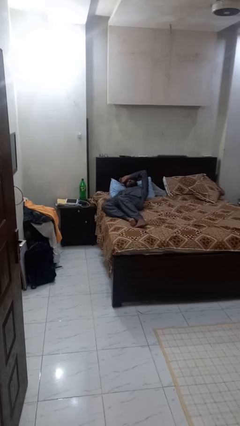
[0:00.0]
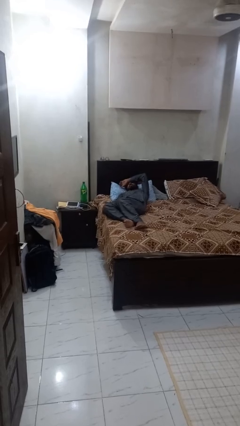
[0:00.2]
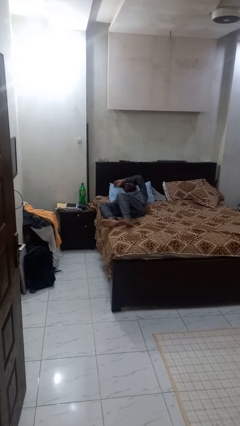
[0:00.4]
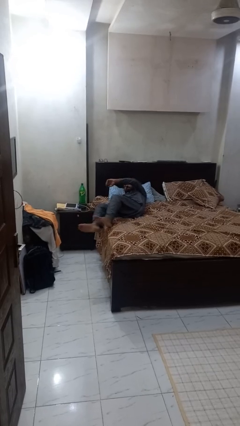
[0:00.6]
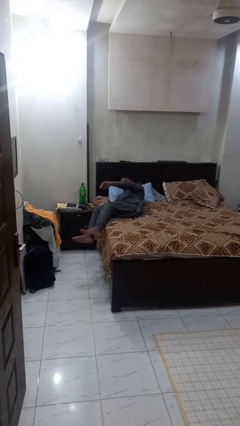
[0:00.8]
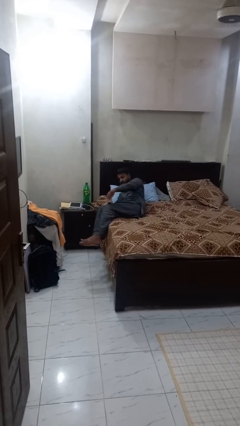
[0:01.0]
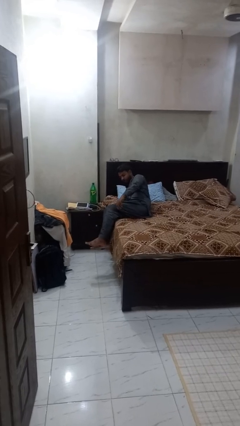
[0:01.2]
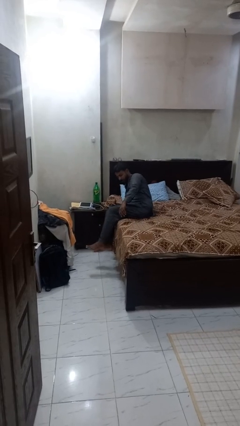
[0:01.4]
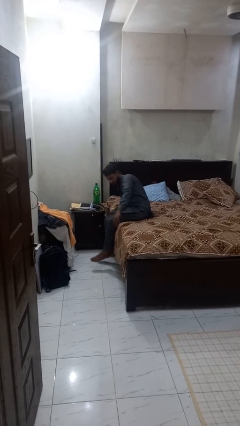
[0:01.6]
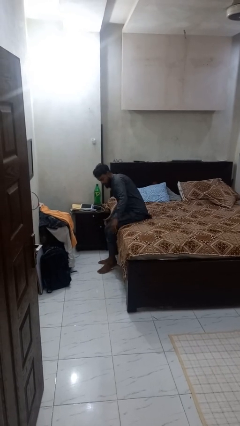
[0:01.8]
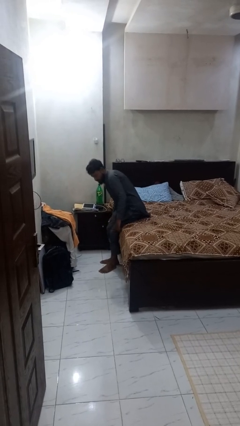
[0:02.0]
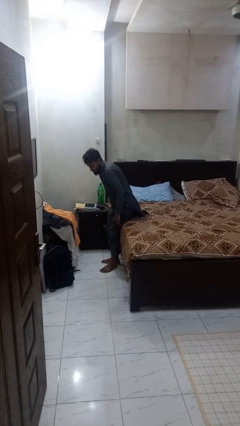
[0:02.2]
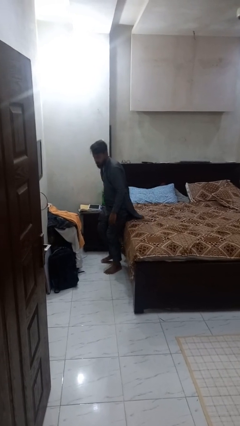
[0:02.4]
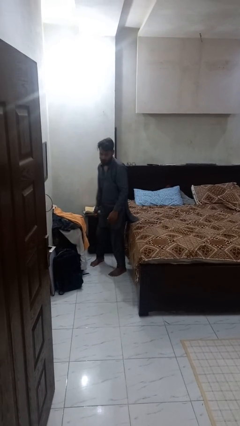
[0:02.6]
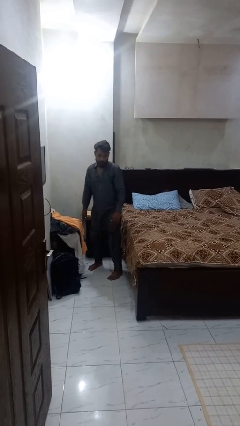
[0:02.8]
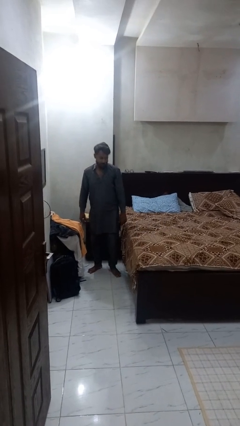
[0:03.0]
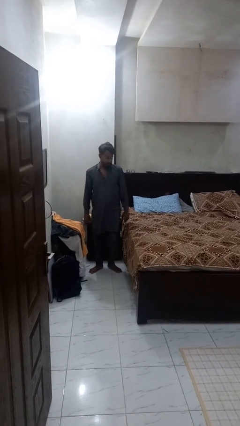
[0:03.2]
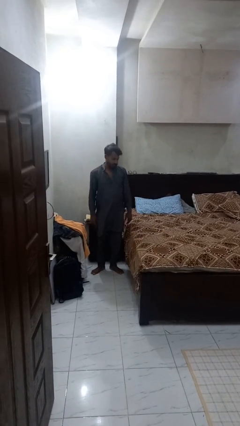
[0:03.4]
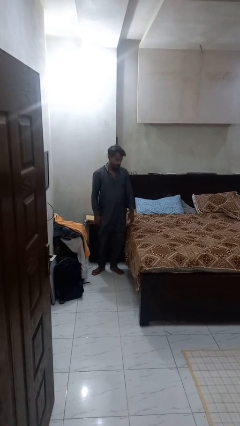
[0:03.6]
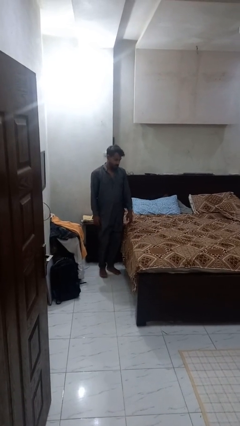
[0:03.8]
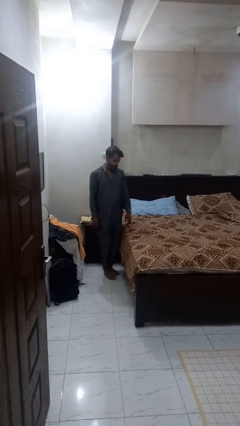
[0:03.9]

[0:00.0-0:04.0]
person stands up

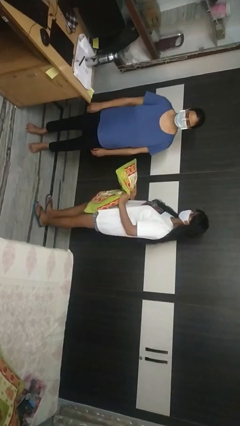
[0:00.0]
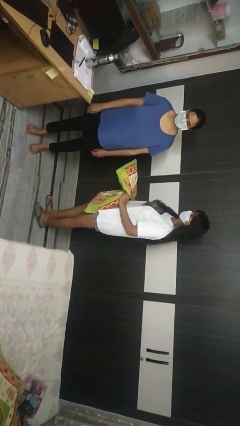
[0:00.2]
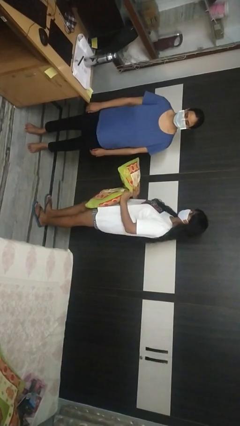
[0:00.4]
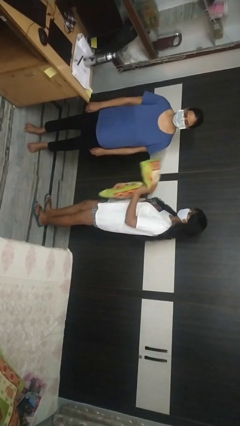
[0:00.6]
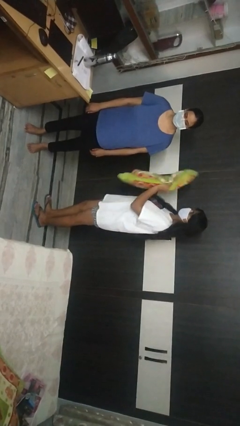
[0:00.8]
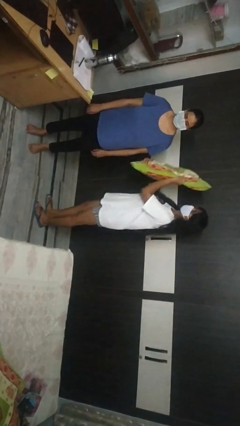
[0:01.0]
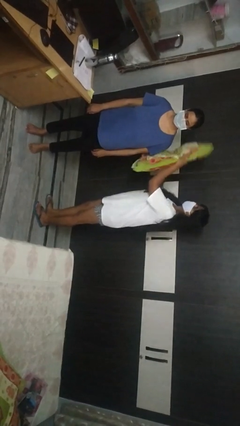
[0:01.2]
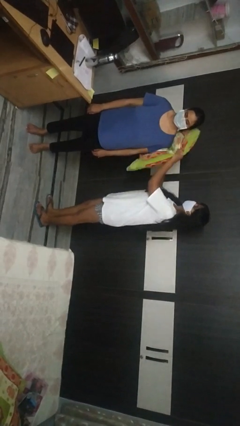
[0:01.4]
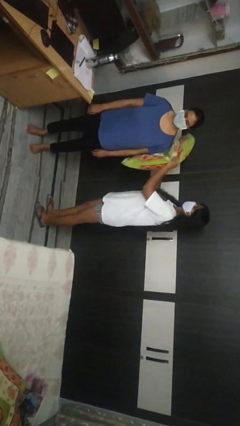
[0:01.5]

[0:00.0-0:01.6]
person hits person with pillow

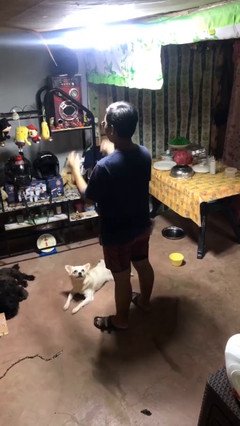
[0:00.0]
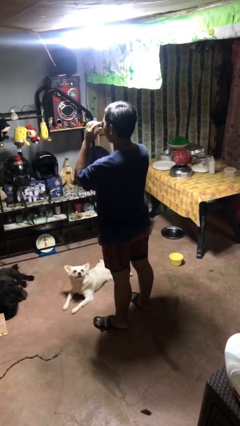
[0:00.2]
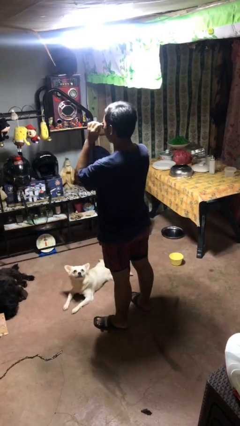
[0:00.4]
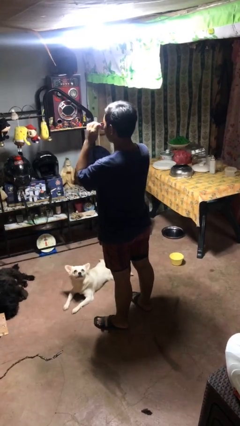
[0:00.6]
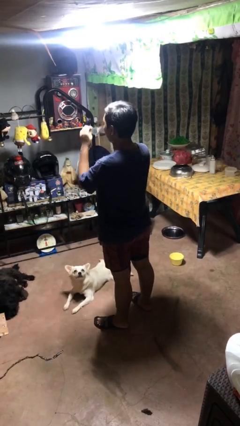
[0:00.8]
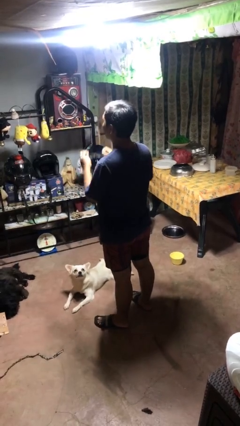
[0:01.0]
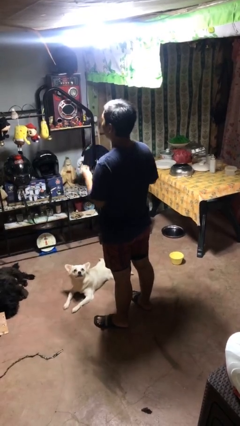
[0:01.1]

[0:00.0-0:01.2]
person takes off sunglasses

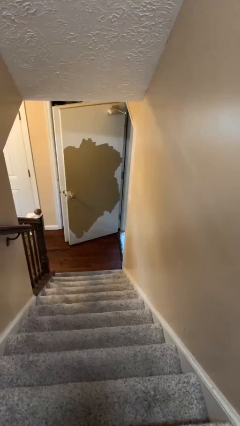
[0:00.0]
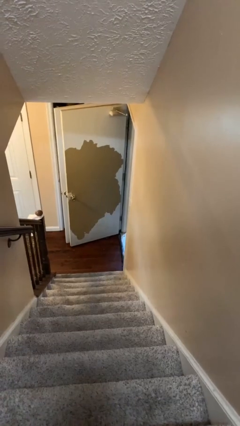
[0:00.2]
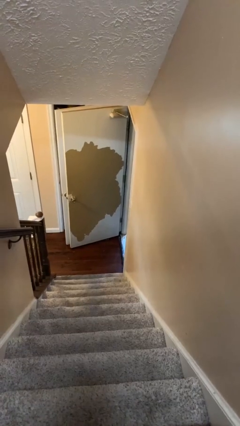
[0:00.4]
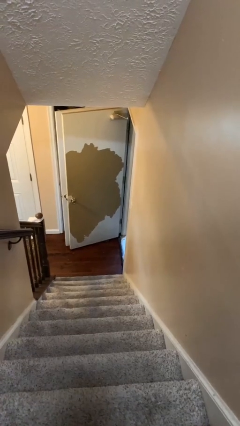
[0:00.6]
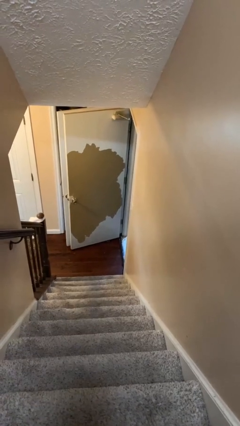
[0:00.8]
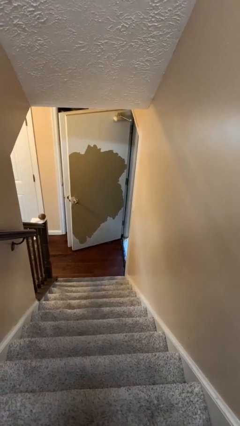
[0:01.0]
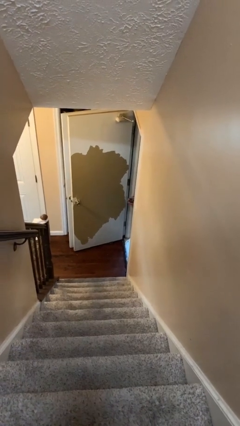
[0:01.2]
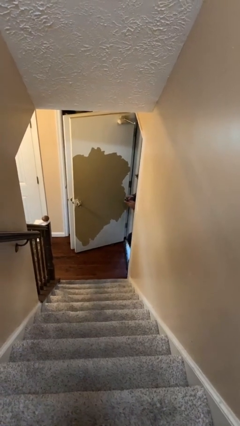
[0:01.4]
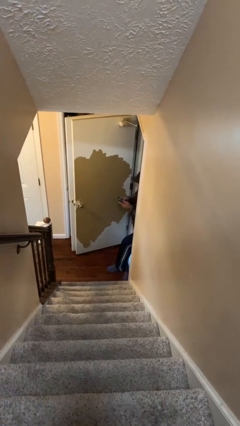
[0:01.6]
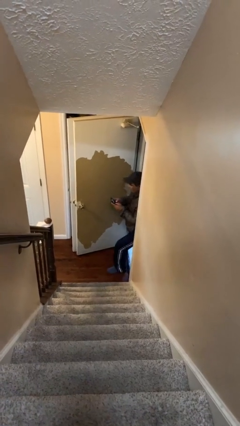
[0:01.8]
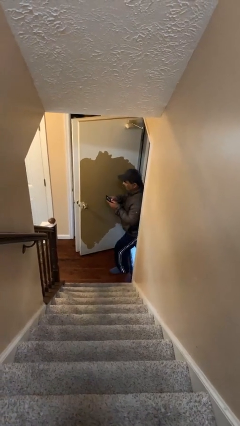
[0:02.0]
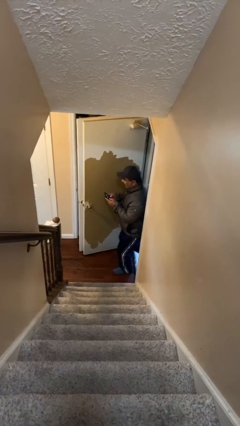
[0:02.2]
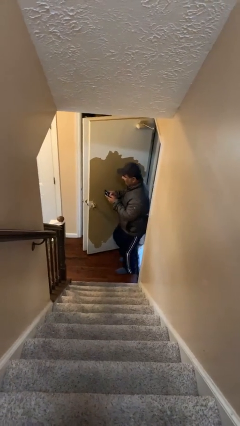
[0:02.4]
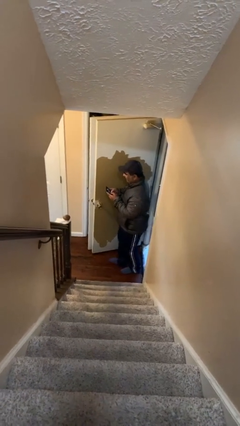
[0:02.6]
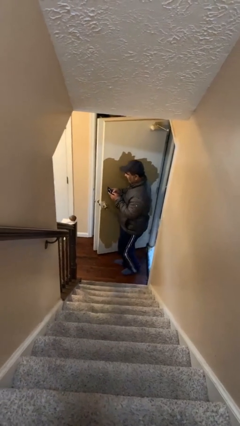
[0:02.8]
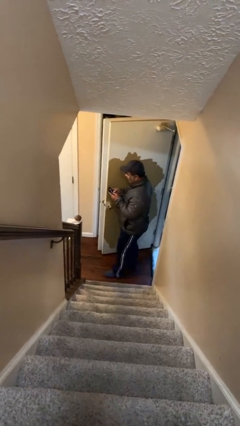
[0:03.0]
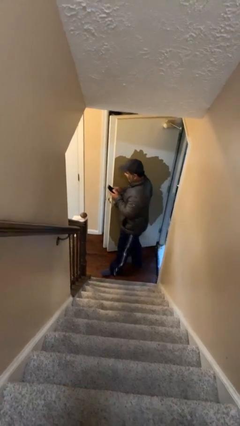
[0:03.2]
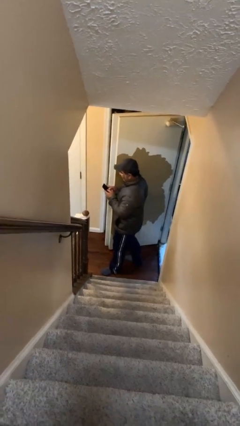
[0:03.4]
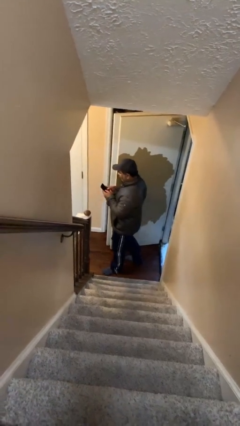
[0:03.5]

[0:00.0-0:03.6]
person enters scene through structure

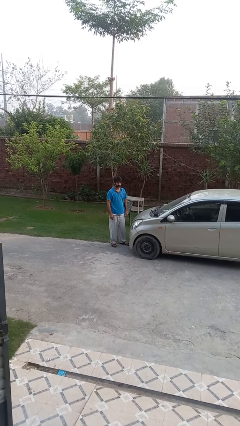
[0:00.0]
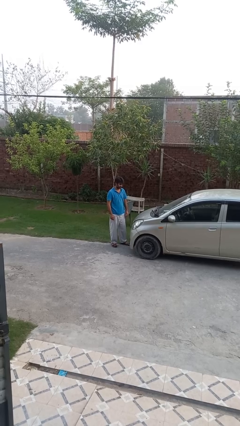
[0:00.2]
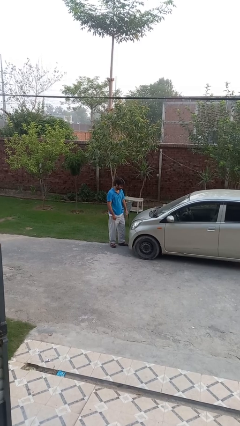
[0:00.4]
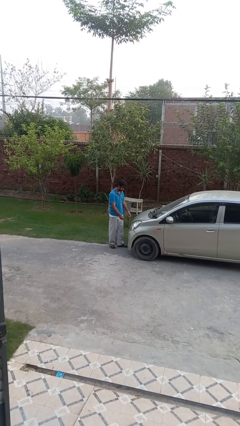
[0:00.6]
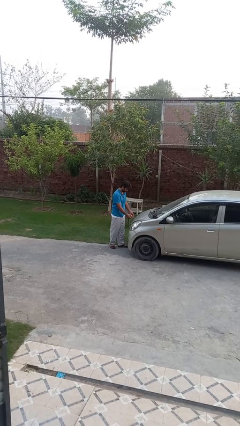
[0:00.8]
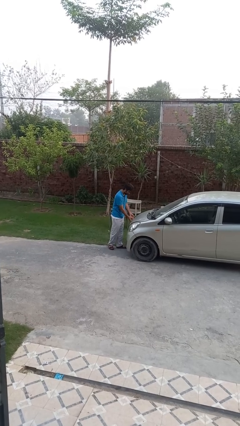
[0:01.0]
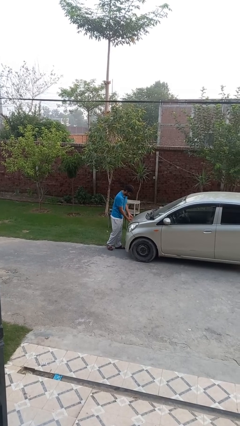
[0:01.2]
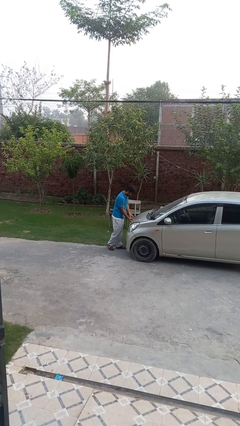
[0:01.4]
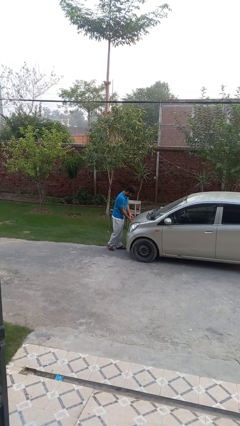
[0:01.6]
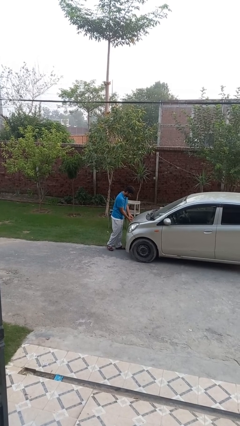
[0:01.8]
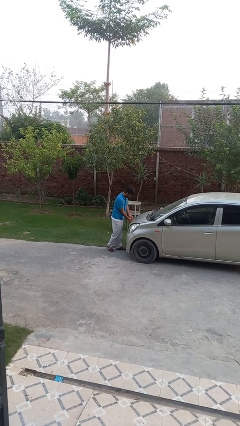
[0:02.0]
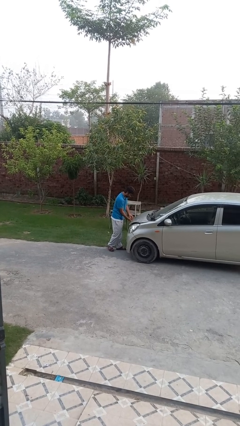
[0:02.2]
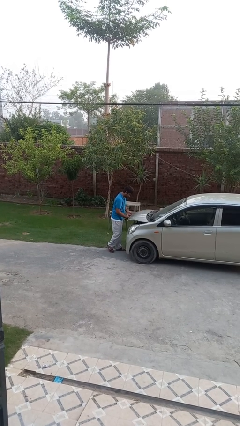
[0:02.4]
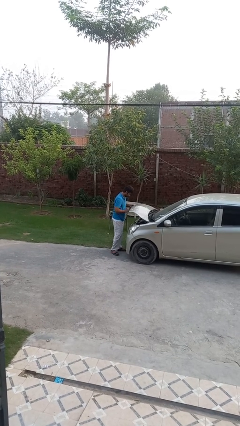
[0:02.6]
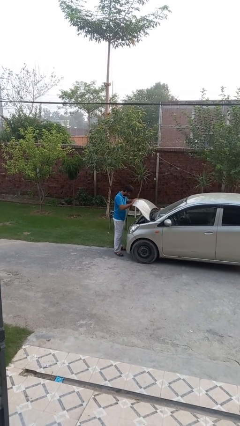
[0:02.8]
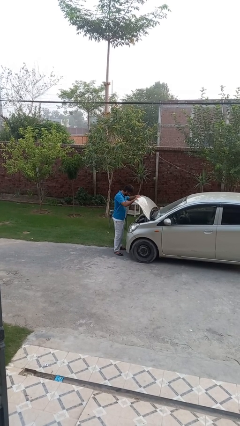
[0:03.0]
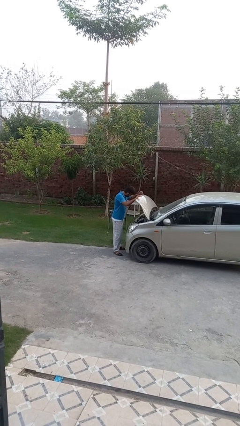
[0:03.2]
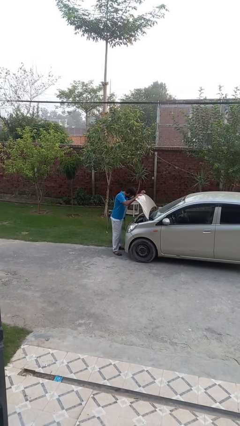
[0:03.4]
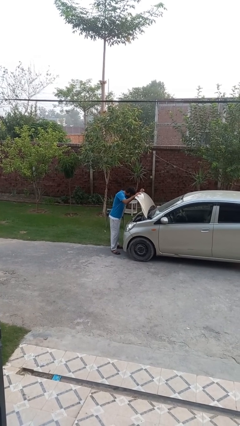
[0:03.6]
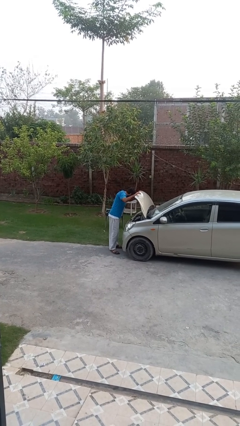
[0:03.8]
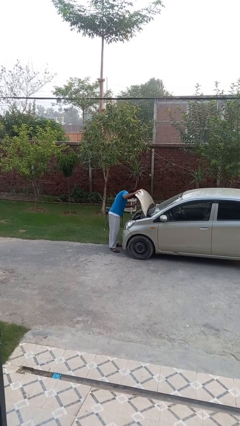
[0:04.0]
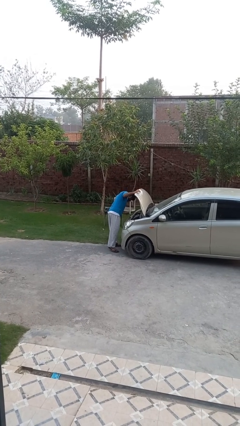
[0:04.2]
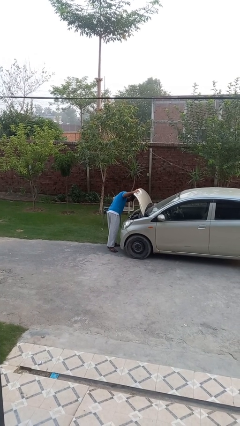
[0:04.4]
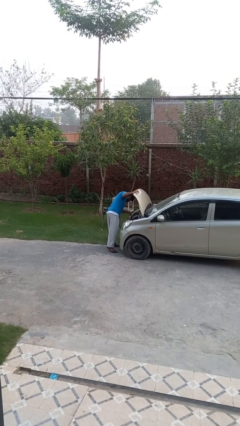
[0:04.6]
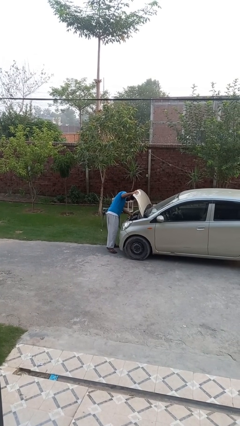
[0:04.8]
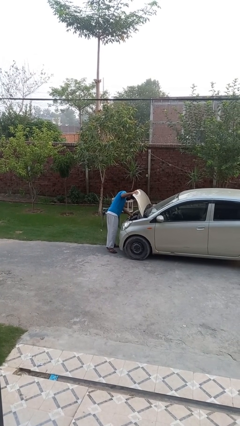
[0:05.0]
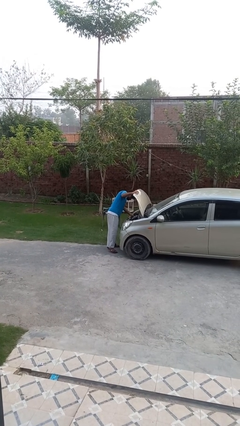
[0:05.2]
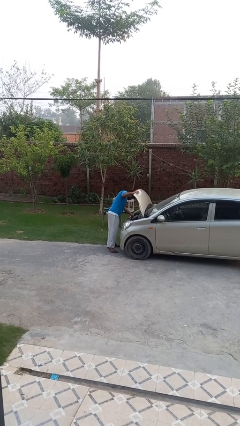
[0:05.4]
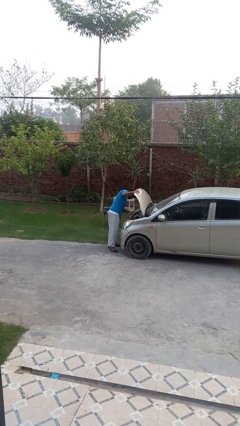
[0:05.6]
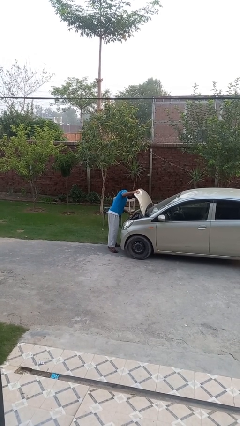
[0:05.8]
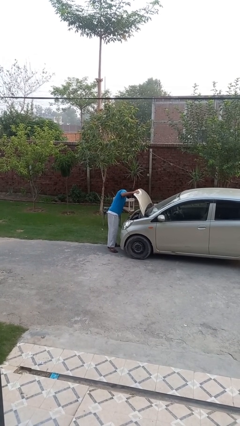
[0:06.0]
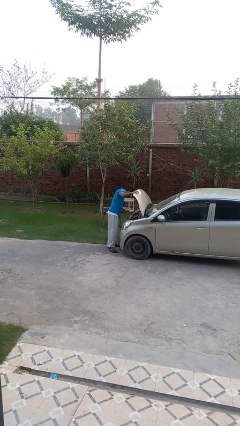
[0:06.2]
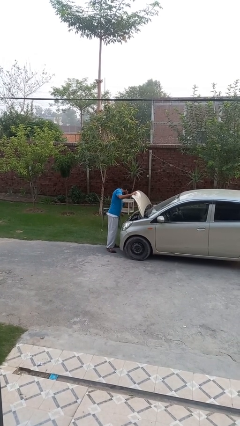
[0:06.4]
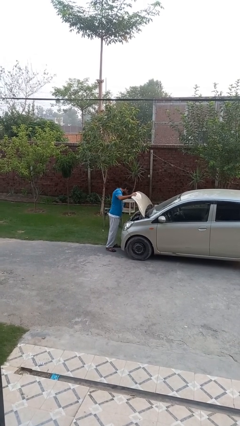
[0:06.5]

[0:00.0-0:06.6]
person opens car hood

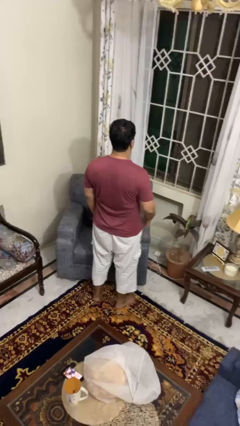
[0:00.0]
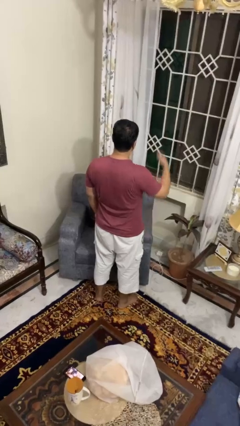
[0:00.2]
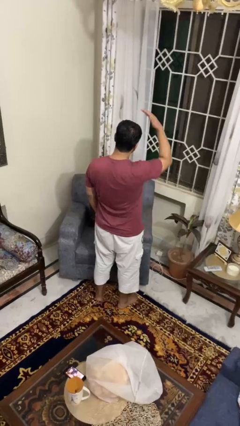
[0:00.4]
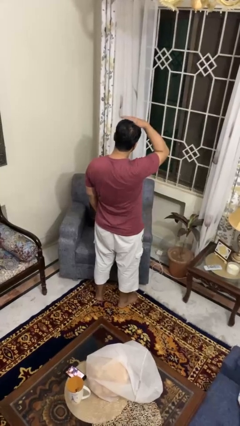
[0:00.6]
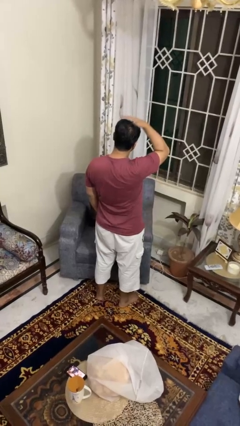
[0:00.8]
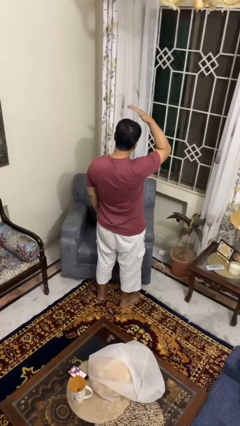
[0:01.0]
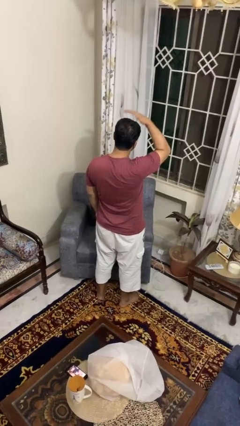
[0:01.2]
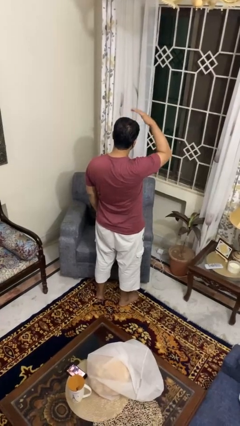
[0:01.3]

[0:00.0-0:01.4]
person pats head
